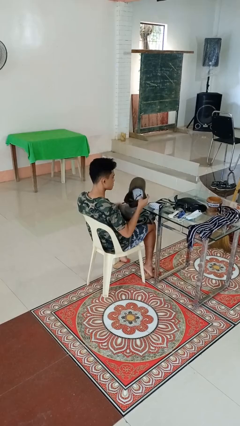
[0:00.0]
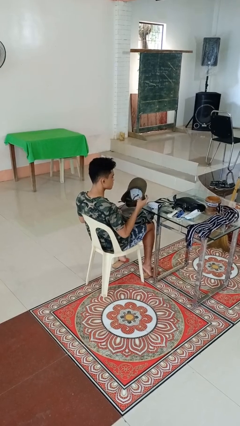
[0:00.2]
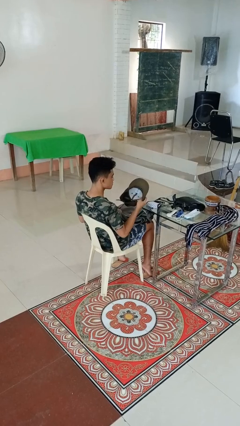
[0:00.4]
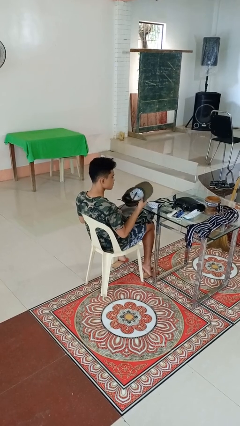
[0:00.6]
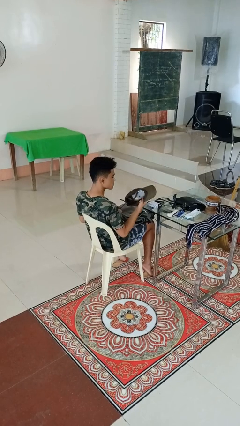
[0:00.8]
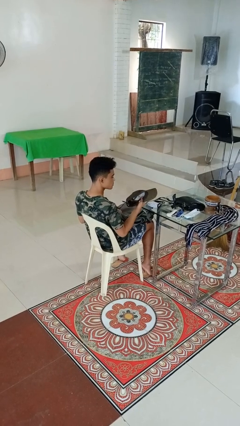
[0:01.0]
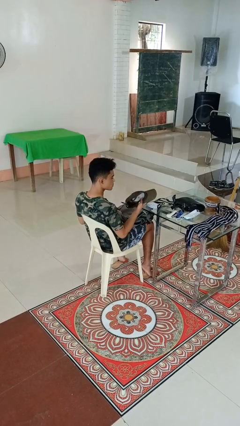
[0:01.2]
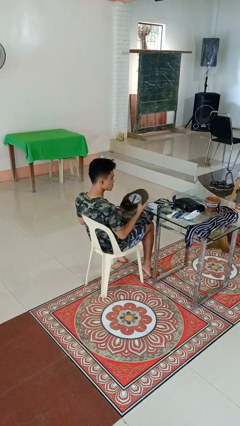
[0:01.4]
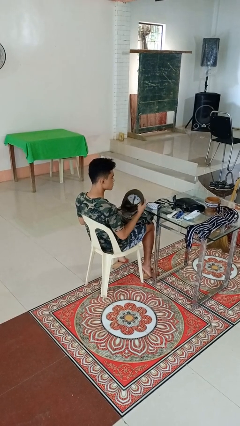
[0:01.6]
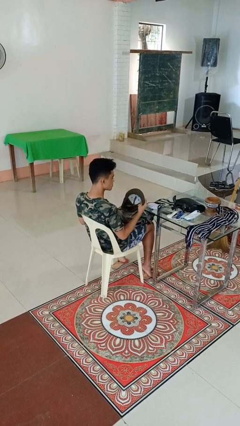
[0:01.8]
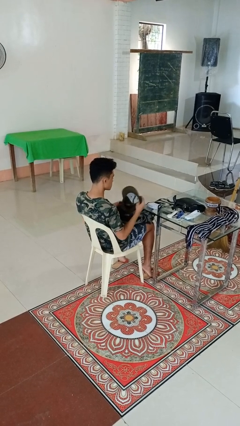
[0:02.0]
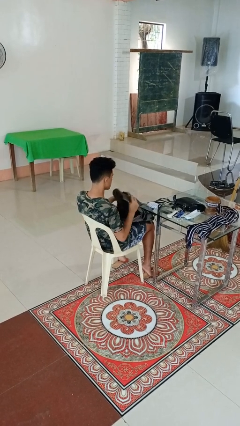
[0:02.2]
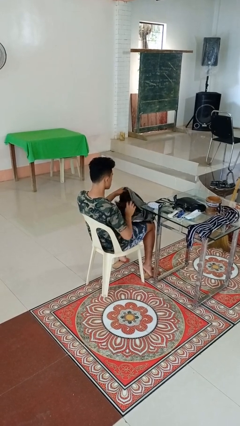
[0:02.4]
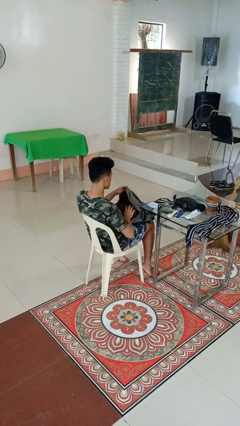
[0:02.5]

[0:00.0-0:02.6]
person takes object from backpack

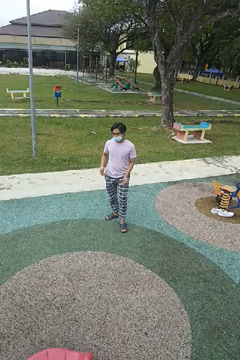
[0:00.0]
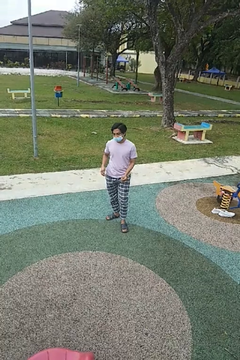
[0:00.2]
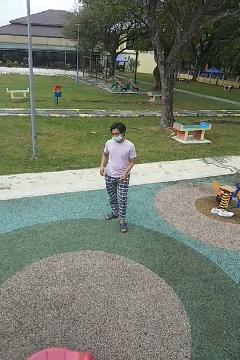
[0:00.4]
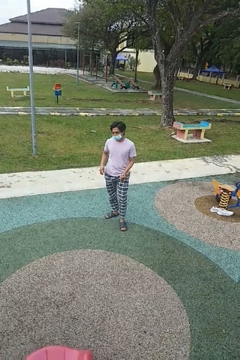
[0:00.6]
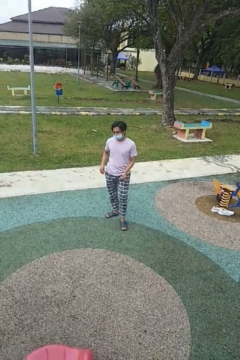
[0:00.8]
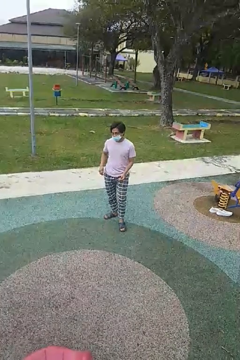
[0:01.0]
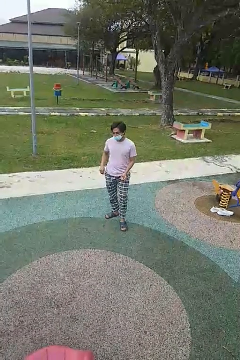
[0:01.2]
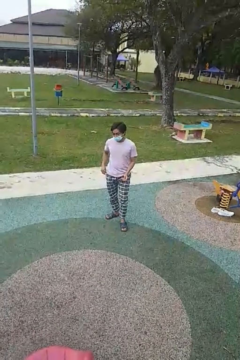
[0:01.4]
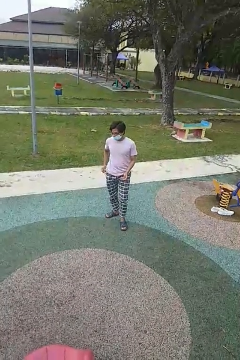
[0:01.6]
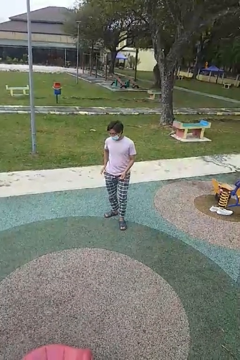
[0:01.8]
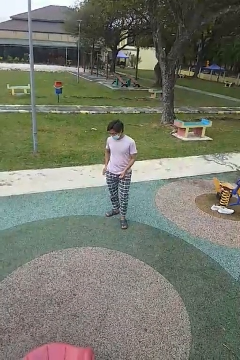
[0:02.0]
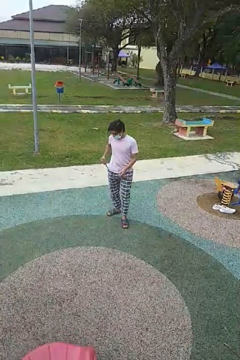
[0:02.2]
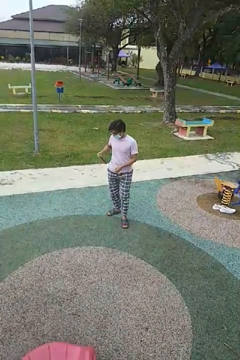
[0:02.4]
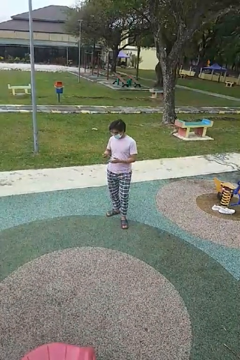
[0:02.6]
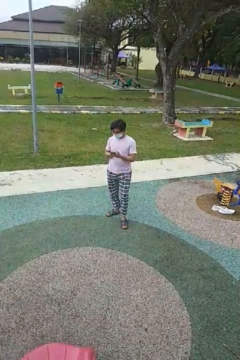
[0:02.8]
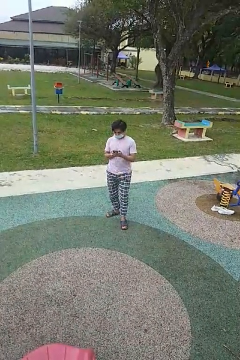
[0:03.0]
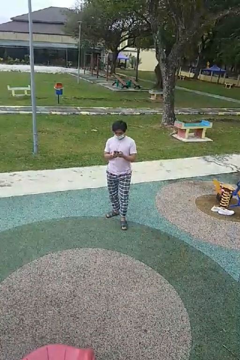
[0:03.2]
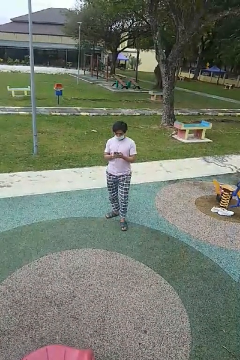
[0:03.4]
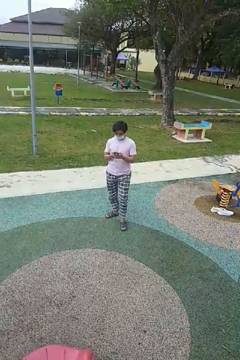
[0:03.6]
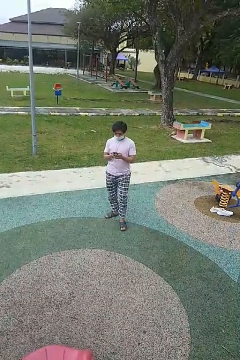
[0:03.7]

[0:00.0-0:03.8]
person takes phone from pocket

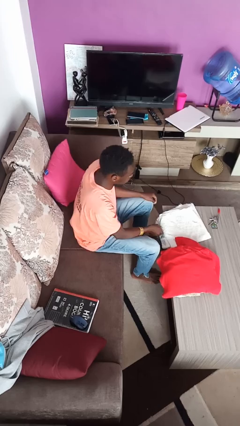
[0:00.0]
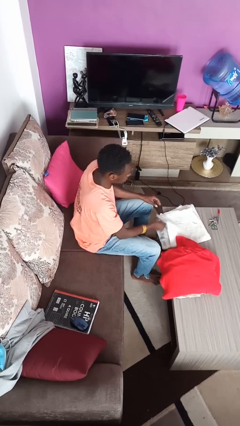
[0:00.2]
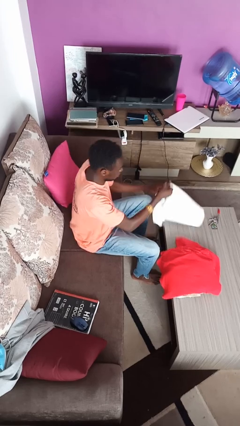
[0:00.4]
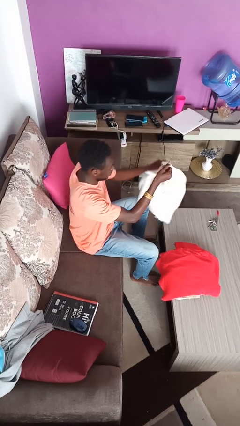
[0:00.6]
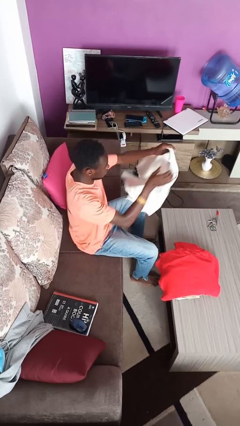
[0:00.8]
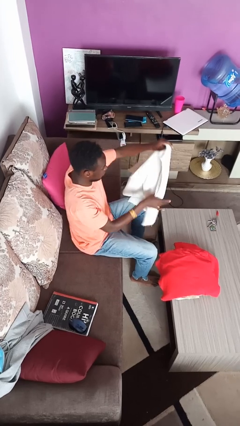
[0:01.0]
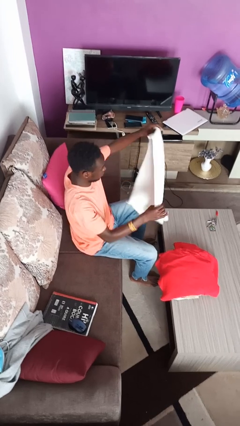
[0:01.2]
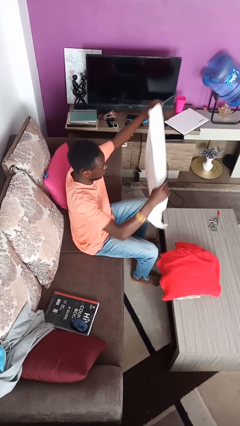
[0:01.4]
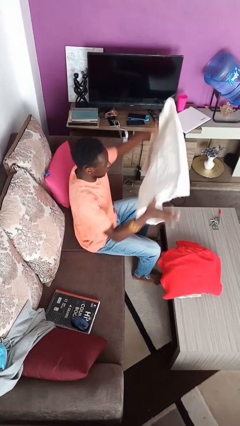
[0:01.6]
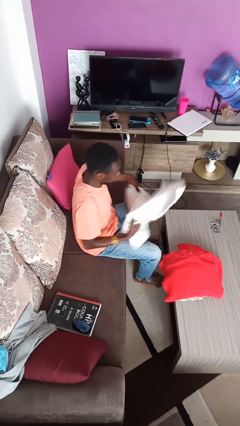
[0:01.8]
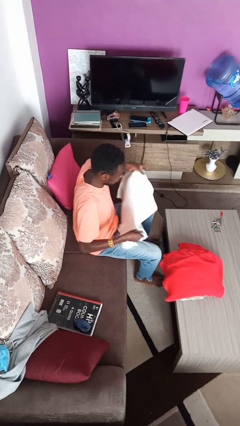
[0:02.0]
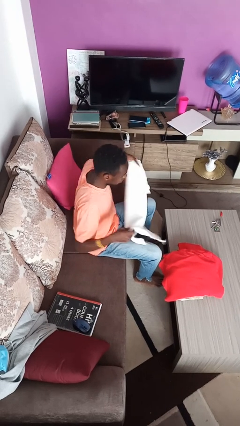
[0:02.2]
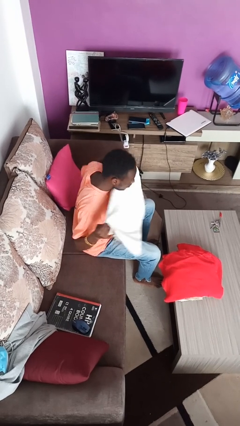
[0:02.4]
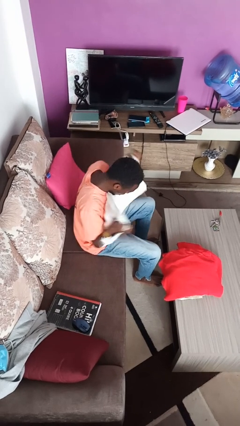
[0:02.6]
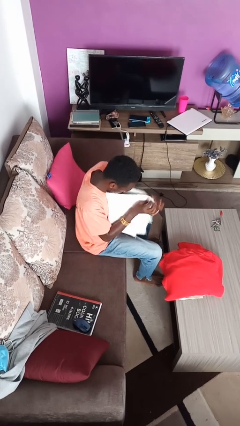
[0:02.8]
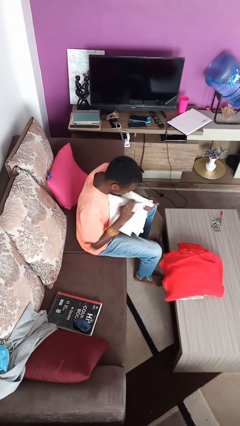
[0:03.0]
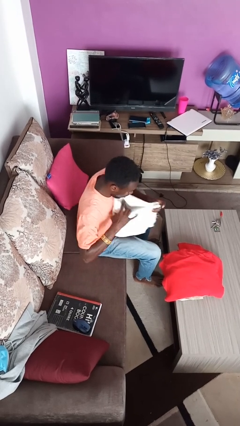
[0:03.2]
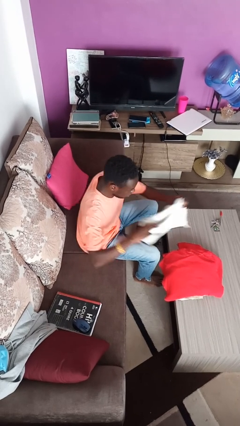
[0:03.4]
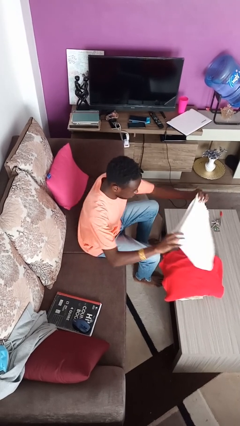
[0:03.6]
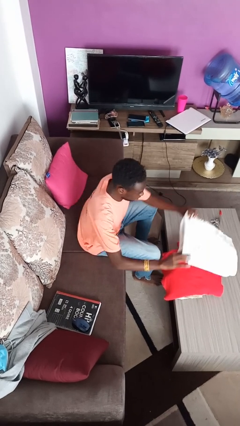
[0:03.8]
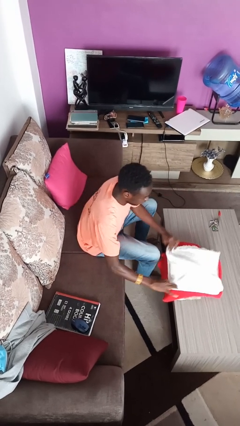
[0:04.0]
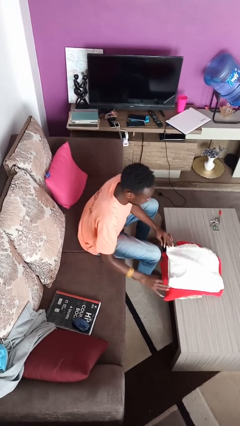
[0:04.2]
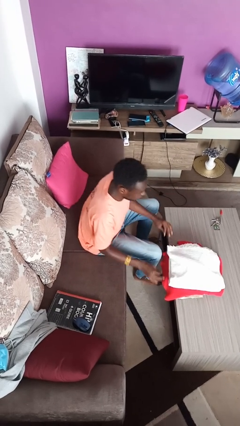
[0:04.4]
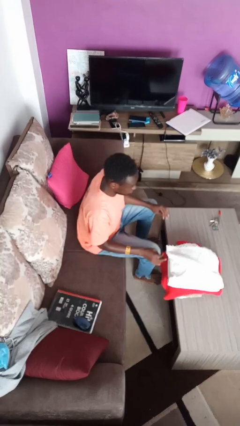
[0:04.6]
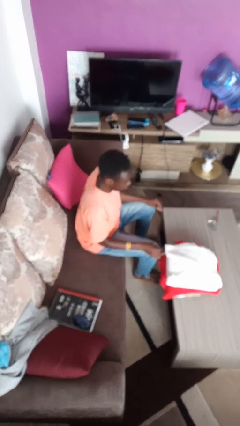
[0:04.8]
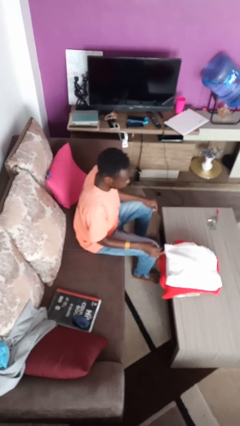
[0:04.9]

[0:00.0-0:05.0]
person folds towel

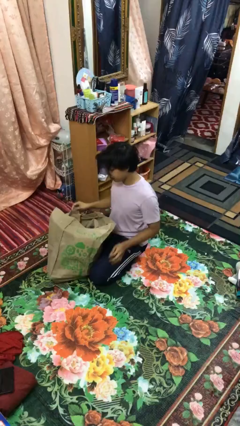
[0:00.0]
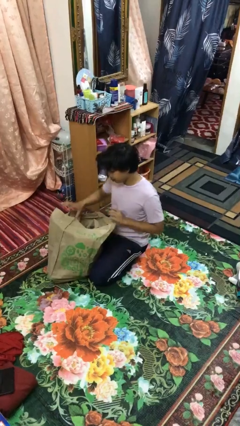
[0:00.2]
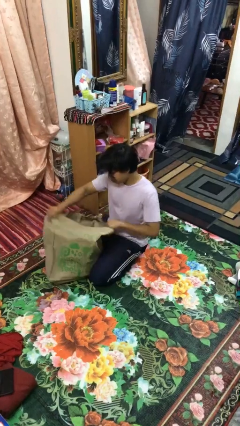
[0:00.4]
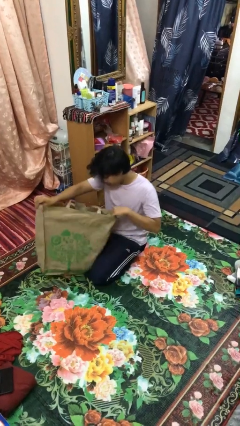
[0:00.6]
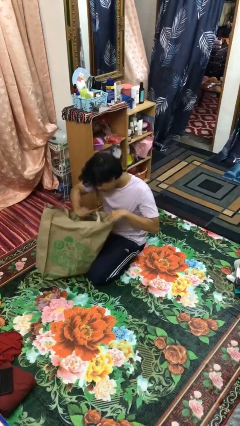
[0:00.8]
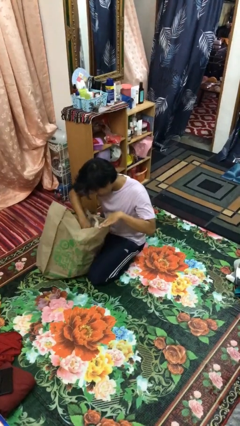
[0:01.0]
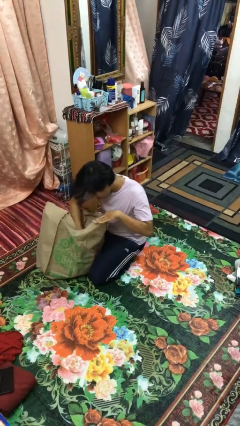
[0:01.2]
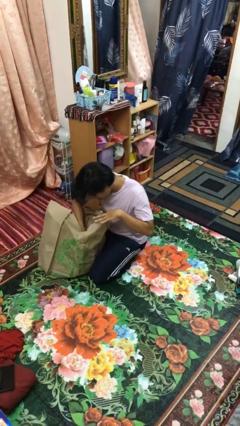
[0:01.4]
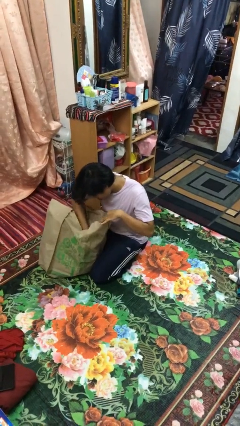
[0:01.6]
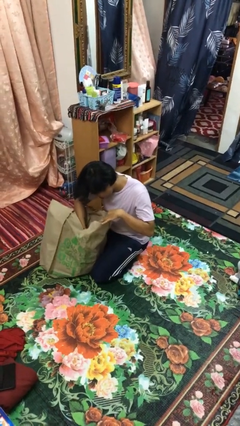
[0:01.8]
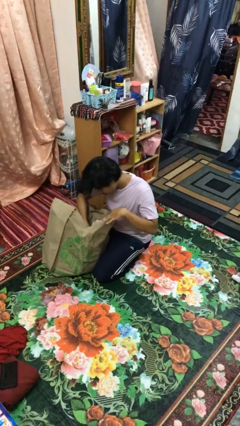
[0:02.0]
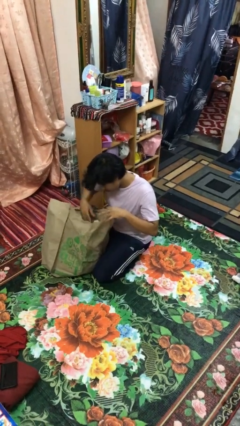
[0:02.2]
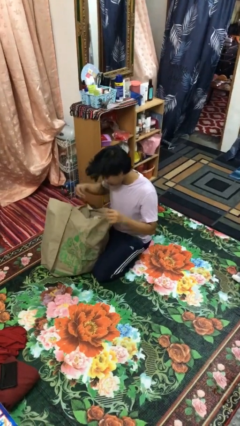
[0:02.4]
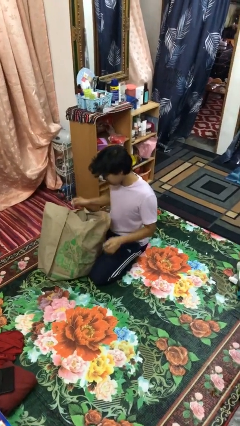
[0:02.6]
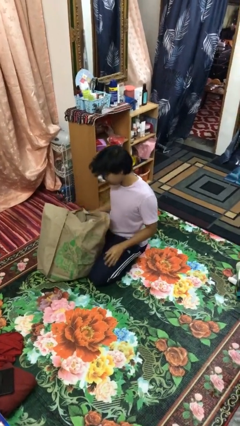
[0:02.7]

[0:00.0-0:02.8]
person searches in bag

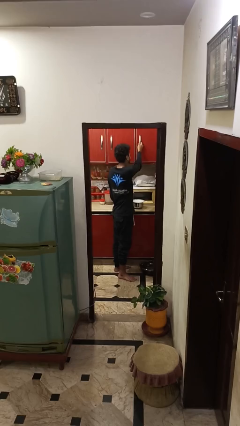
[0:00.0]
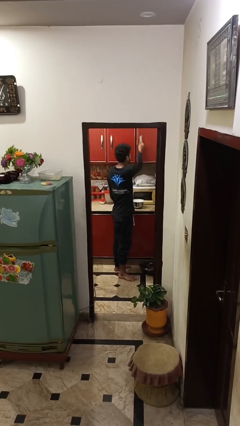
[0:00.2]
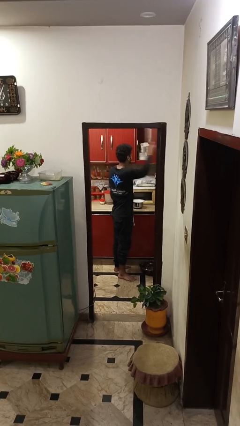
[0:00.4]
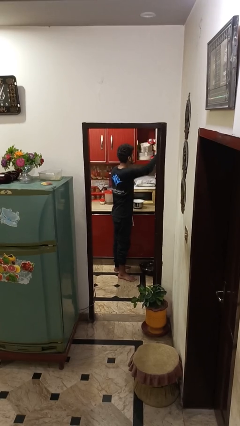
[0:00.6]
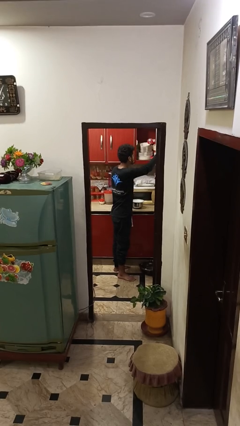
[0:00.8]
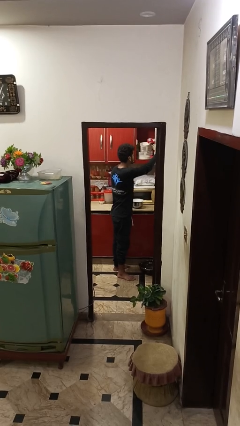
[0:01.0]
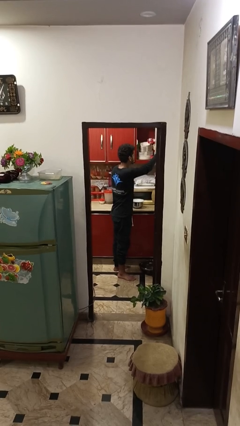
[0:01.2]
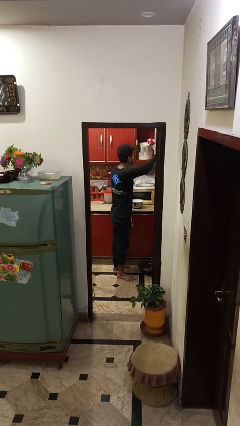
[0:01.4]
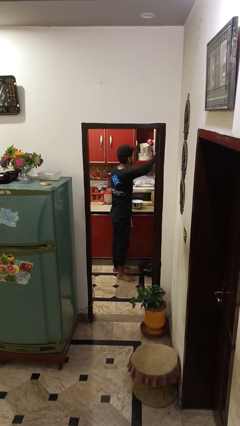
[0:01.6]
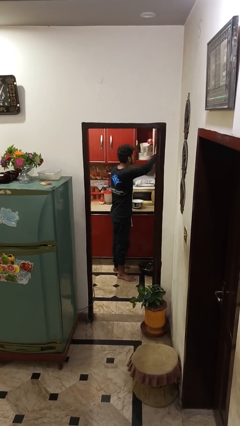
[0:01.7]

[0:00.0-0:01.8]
person opens cabinet

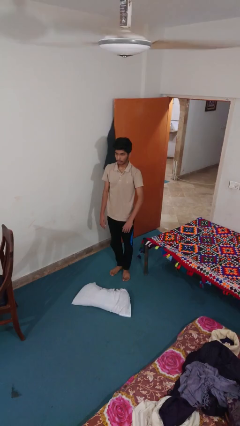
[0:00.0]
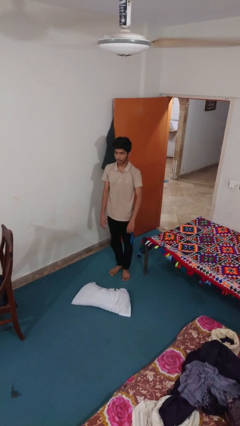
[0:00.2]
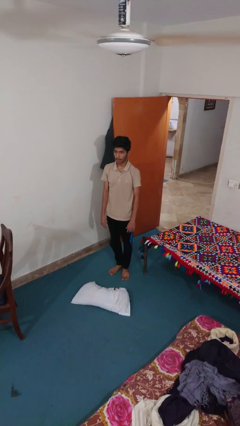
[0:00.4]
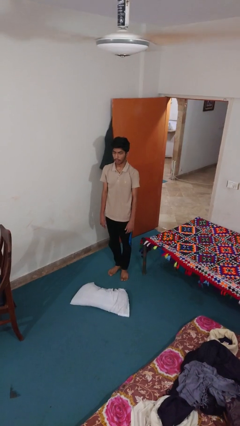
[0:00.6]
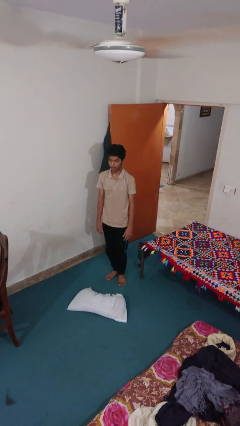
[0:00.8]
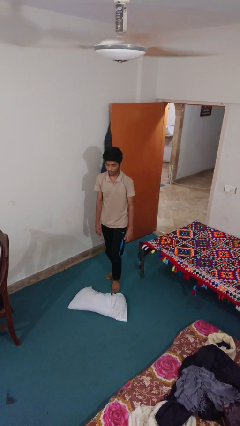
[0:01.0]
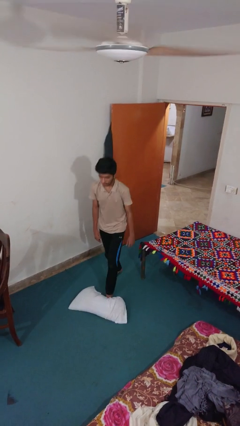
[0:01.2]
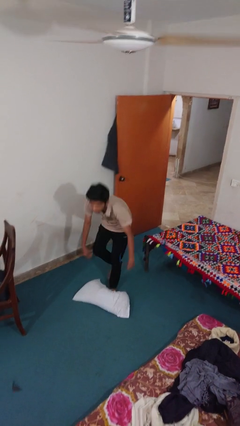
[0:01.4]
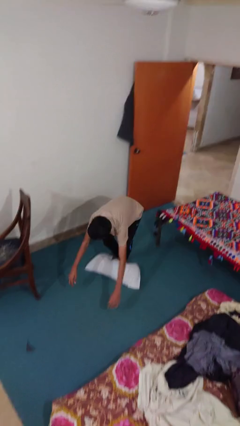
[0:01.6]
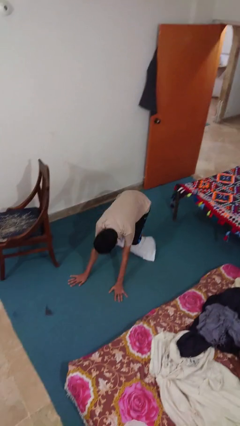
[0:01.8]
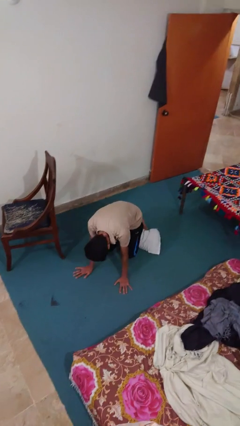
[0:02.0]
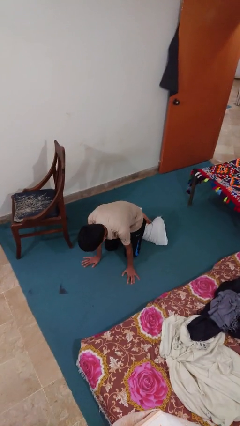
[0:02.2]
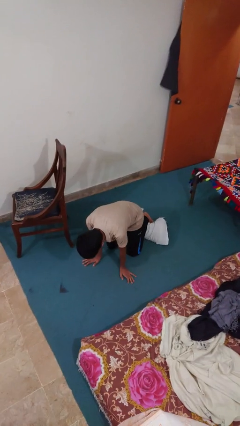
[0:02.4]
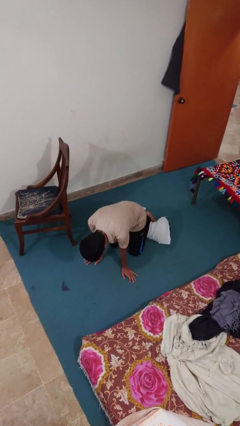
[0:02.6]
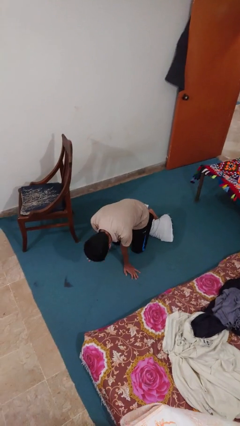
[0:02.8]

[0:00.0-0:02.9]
person trips on object on floor
